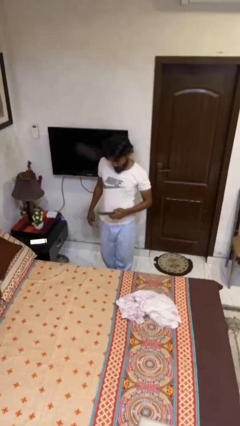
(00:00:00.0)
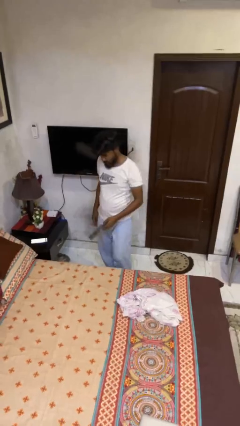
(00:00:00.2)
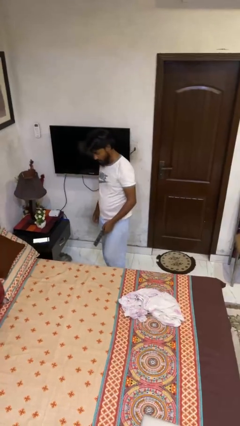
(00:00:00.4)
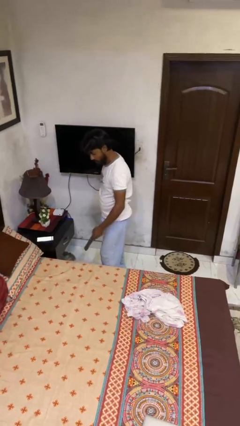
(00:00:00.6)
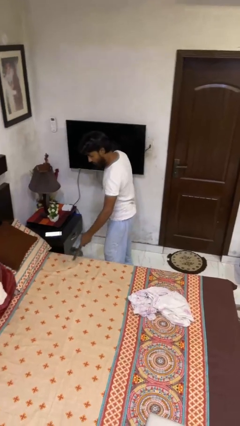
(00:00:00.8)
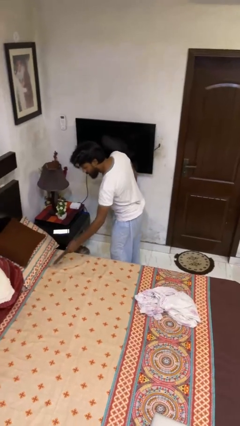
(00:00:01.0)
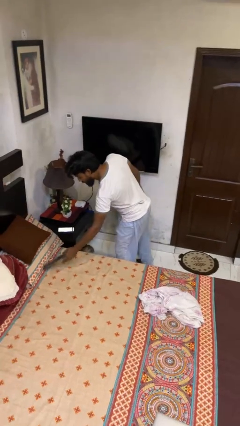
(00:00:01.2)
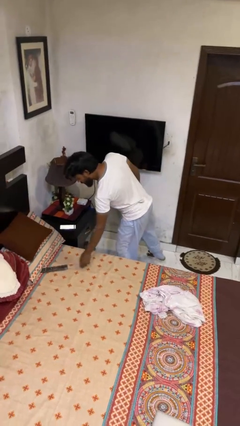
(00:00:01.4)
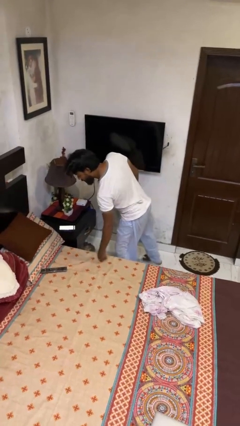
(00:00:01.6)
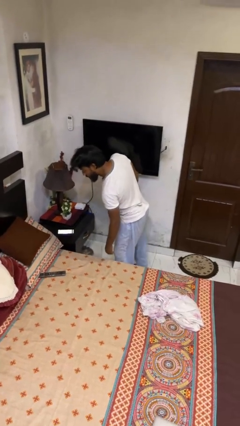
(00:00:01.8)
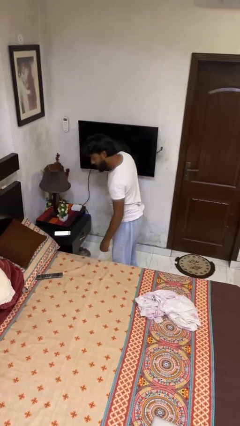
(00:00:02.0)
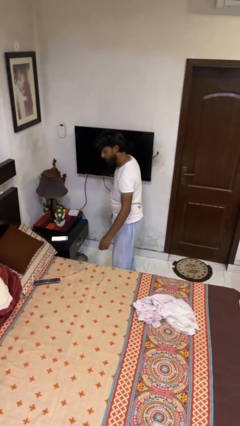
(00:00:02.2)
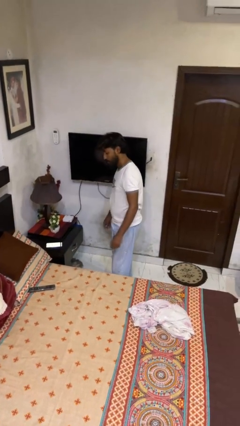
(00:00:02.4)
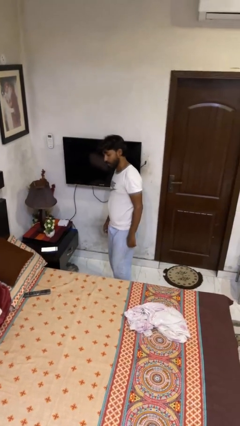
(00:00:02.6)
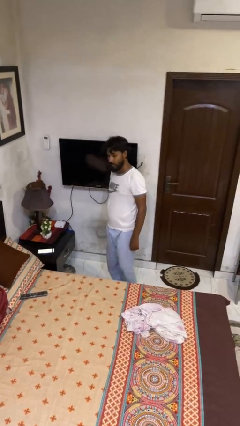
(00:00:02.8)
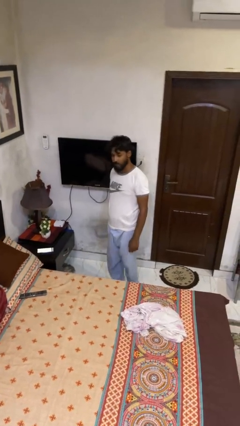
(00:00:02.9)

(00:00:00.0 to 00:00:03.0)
person puts down object on bed

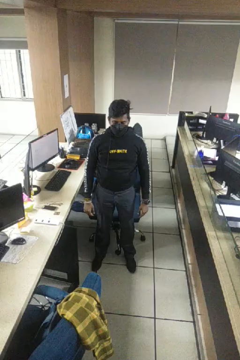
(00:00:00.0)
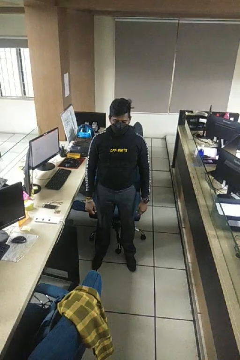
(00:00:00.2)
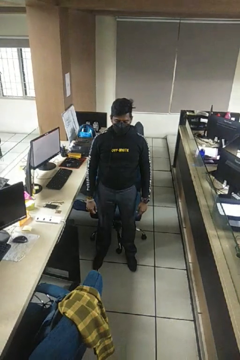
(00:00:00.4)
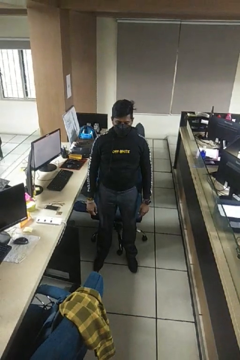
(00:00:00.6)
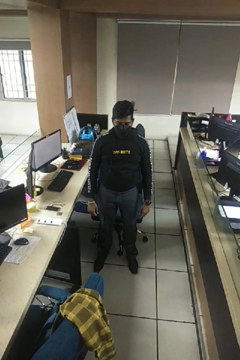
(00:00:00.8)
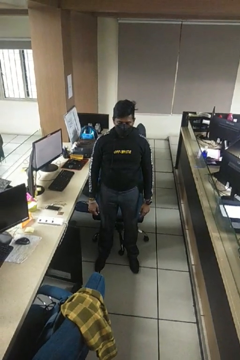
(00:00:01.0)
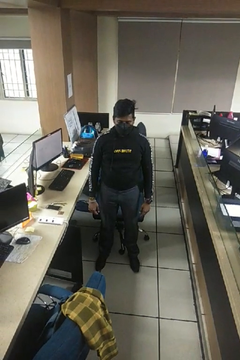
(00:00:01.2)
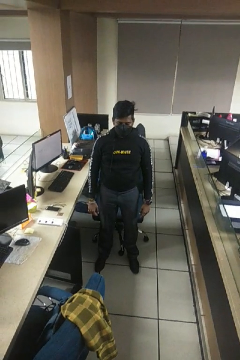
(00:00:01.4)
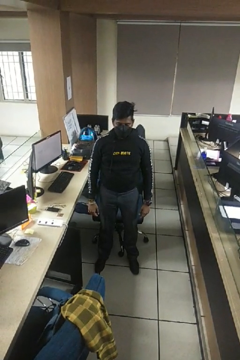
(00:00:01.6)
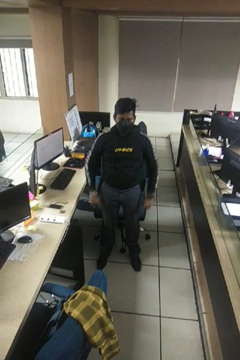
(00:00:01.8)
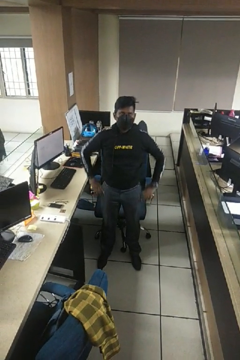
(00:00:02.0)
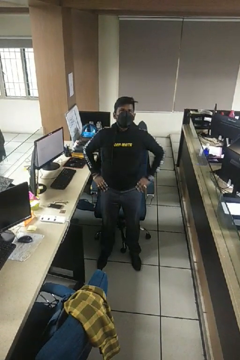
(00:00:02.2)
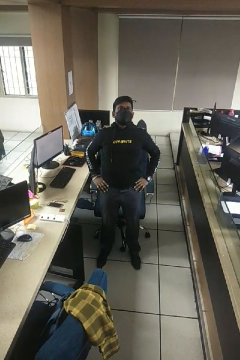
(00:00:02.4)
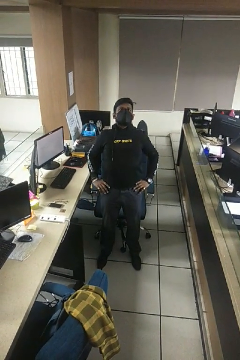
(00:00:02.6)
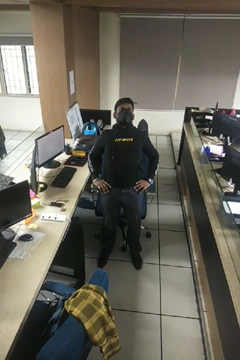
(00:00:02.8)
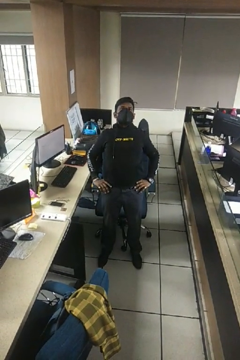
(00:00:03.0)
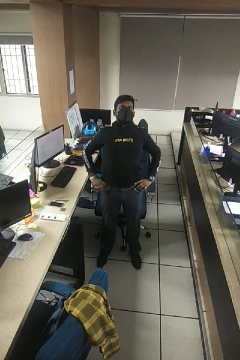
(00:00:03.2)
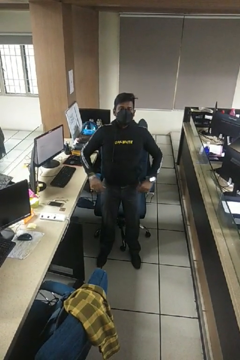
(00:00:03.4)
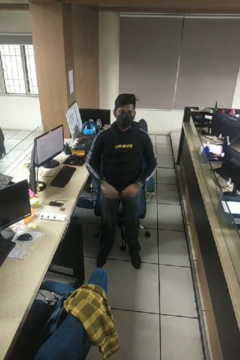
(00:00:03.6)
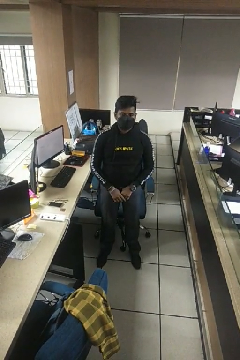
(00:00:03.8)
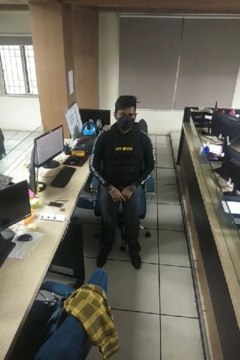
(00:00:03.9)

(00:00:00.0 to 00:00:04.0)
person stretches back

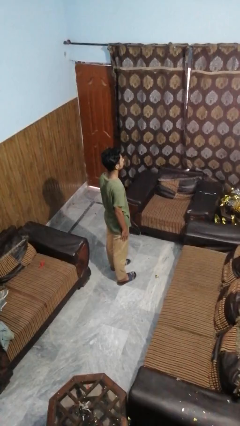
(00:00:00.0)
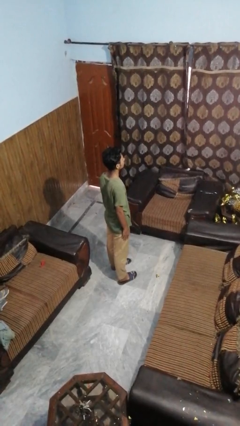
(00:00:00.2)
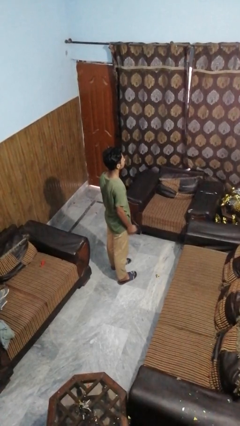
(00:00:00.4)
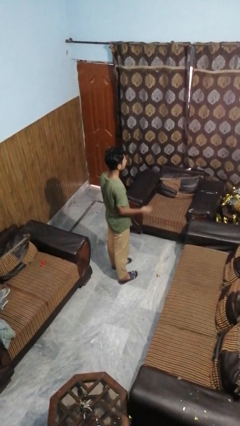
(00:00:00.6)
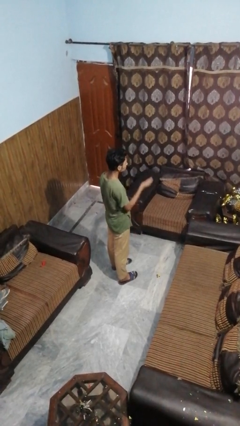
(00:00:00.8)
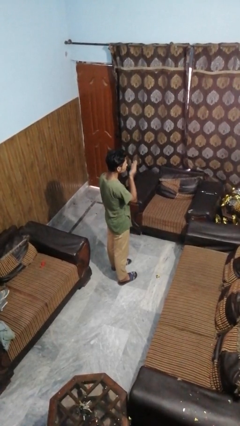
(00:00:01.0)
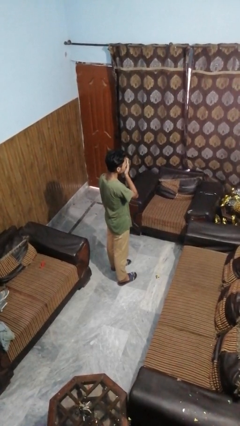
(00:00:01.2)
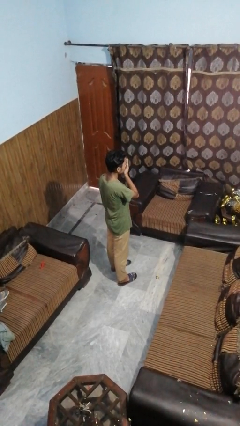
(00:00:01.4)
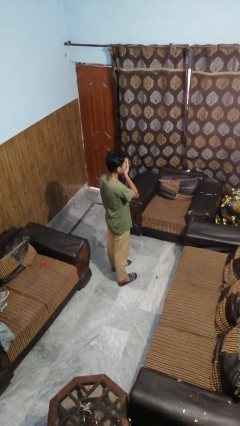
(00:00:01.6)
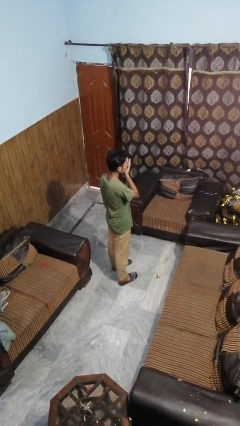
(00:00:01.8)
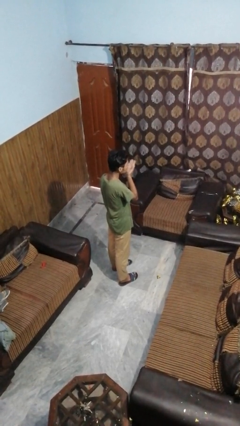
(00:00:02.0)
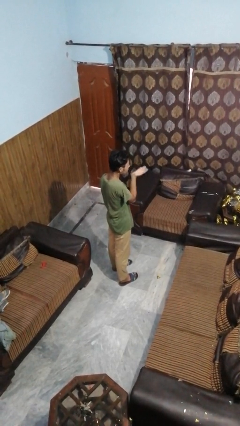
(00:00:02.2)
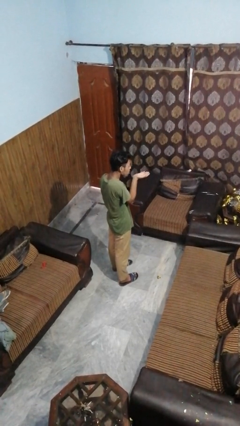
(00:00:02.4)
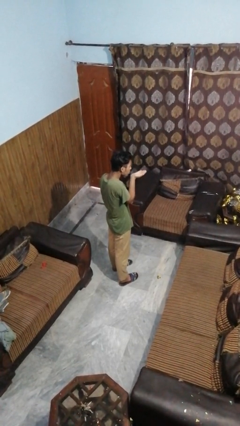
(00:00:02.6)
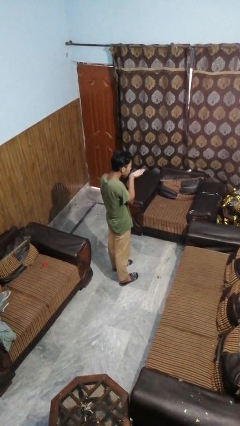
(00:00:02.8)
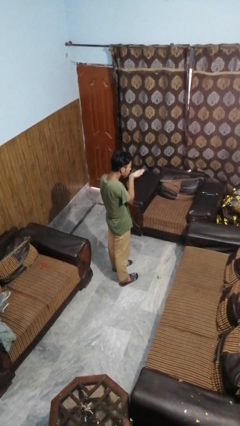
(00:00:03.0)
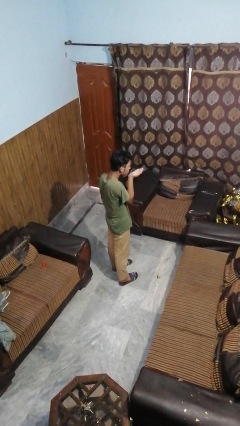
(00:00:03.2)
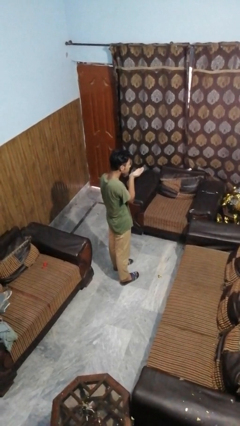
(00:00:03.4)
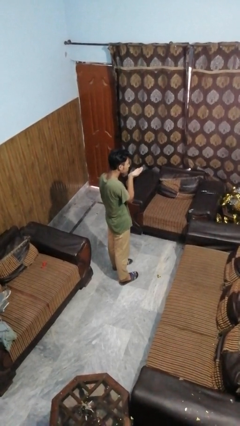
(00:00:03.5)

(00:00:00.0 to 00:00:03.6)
person gestures blow kiss

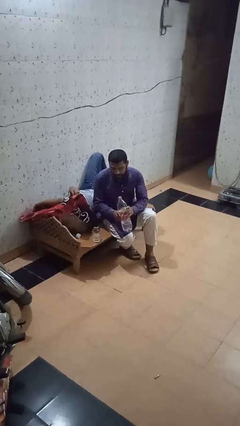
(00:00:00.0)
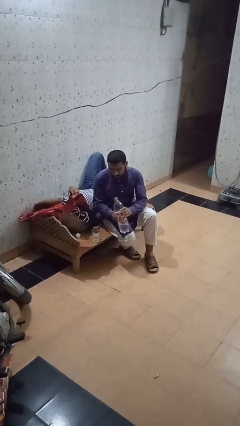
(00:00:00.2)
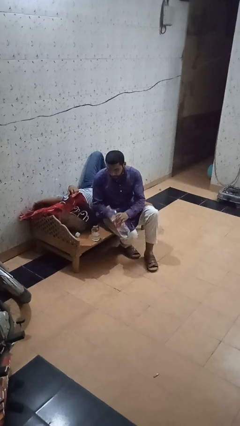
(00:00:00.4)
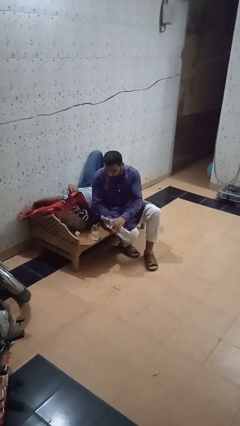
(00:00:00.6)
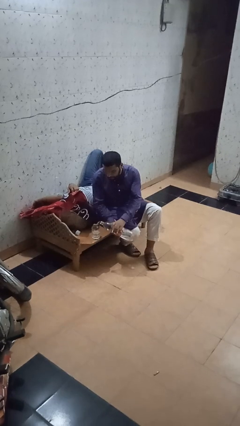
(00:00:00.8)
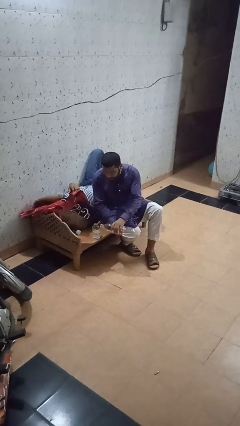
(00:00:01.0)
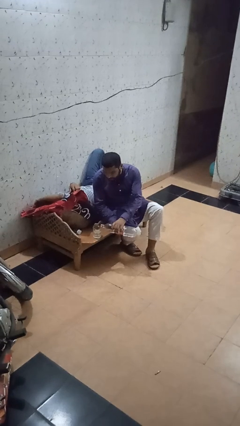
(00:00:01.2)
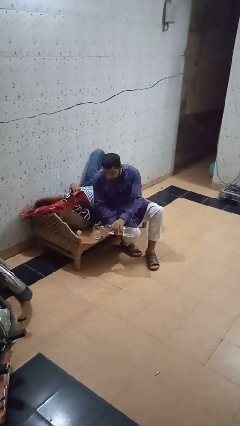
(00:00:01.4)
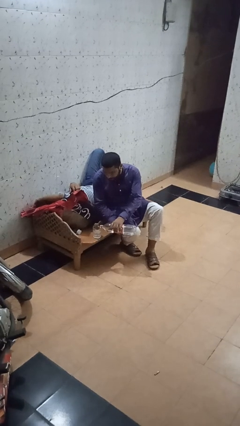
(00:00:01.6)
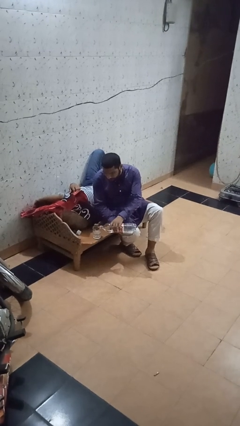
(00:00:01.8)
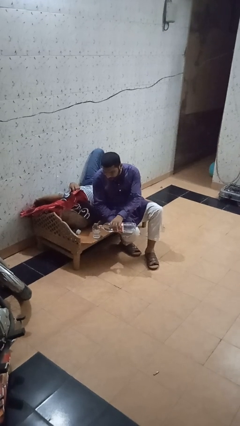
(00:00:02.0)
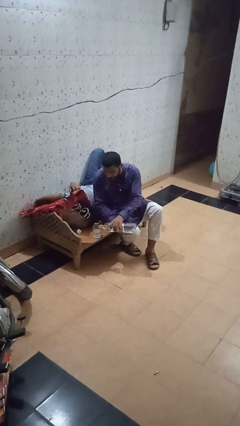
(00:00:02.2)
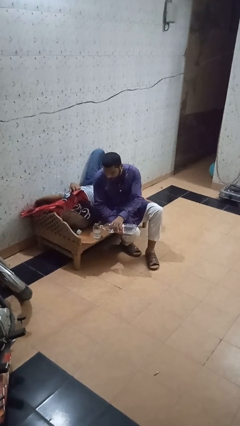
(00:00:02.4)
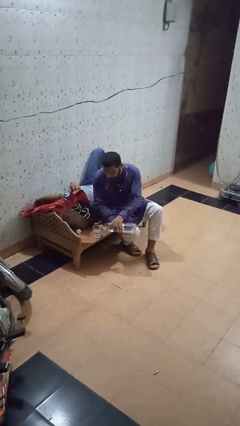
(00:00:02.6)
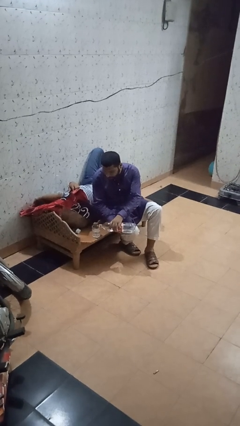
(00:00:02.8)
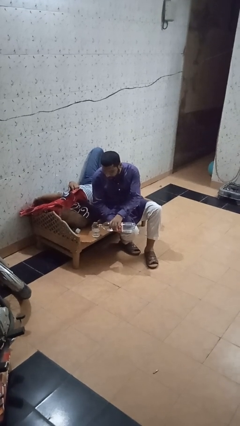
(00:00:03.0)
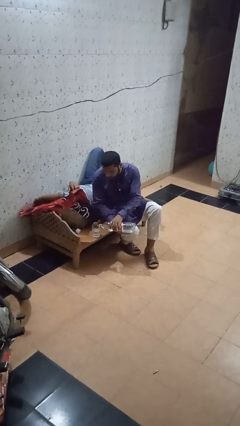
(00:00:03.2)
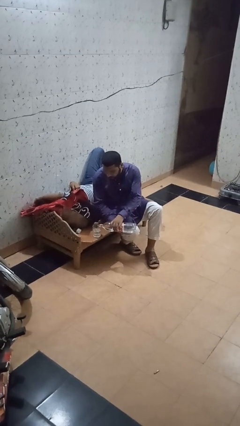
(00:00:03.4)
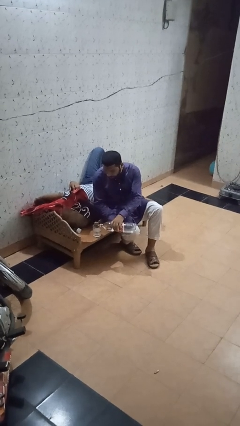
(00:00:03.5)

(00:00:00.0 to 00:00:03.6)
person pours liquid into cup

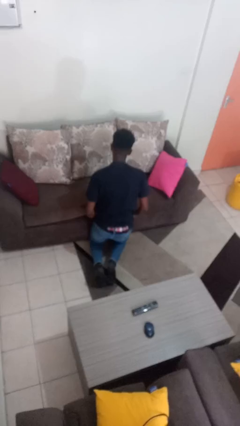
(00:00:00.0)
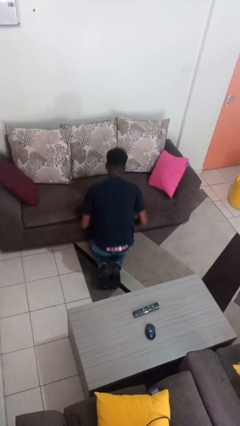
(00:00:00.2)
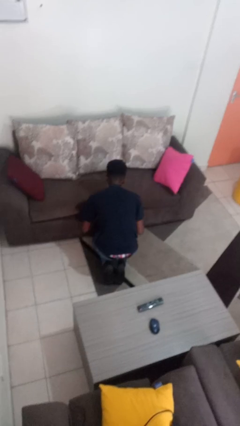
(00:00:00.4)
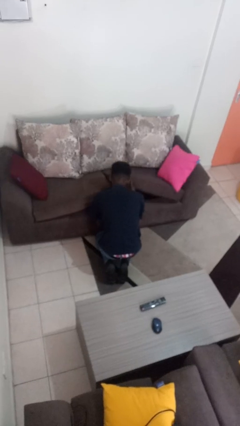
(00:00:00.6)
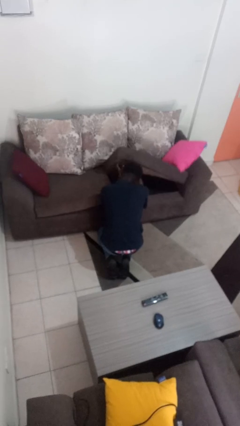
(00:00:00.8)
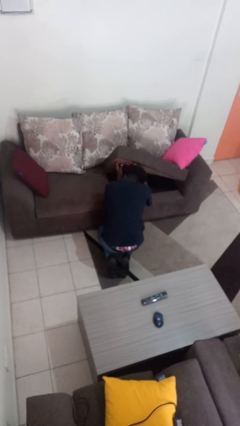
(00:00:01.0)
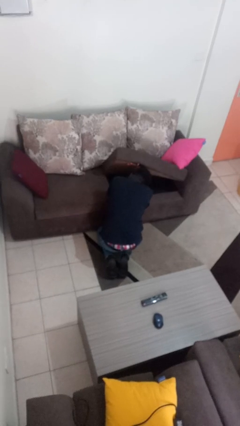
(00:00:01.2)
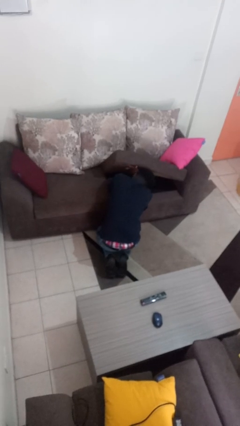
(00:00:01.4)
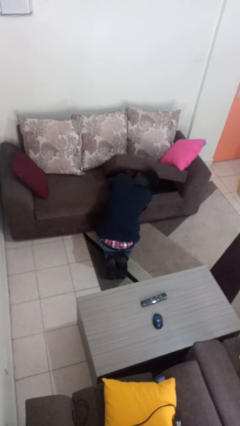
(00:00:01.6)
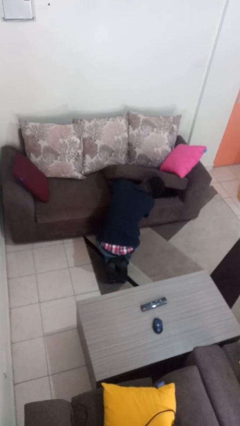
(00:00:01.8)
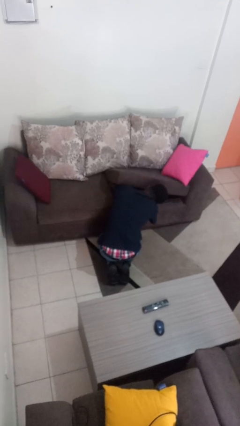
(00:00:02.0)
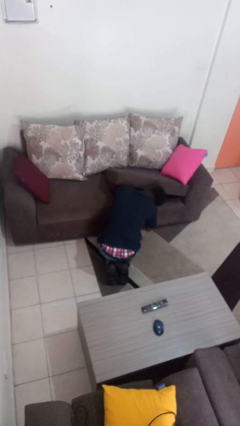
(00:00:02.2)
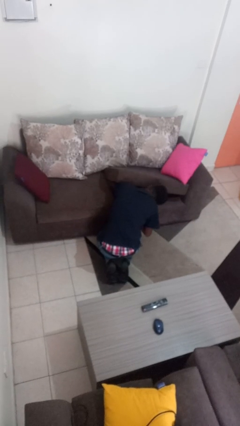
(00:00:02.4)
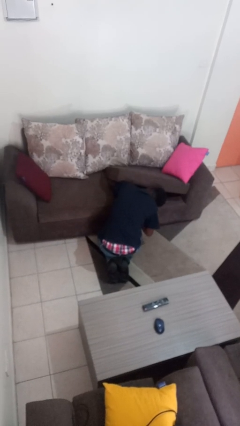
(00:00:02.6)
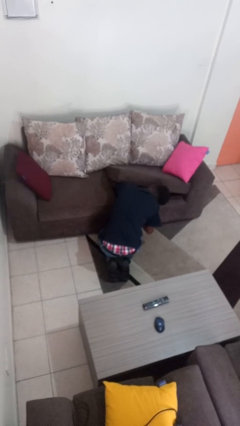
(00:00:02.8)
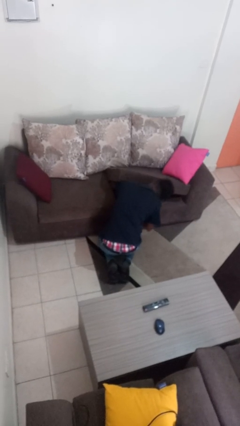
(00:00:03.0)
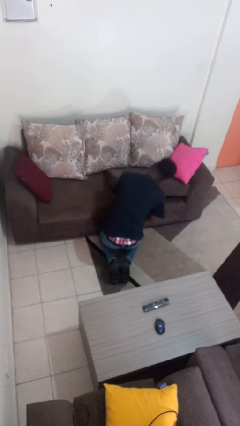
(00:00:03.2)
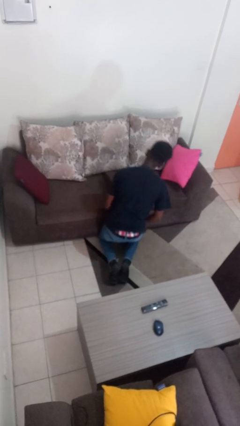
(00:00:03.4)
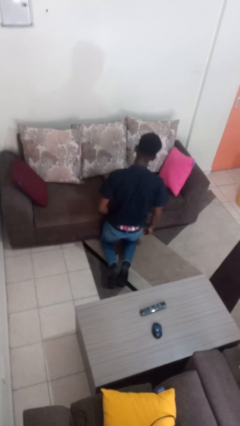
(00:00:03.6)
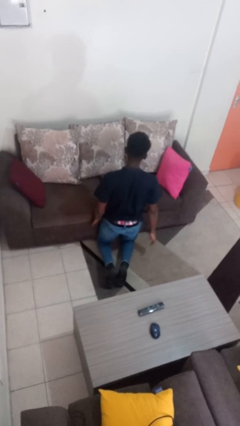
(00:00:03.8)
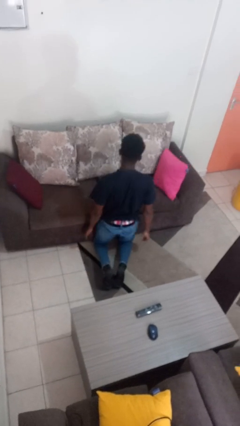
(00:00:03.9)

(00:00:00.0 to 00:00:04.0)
person searches under couch
